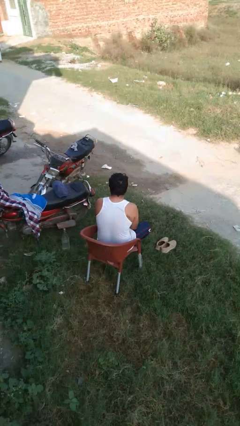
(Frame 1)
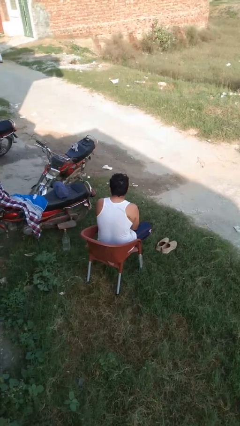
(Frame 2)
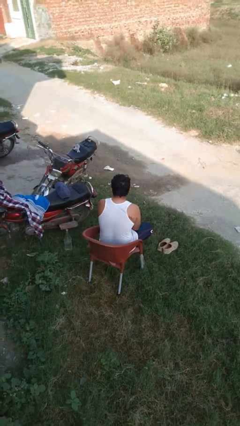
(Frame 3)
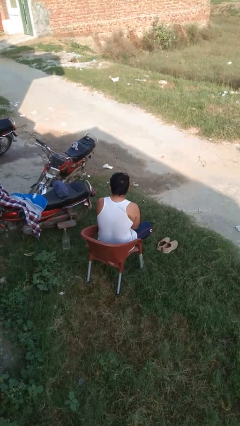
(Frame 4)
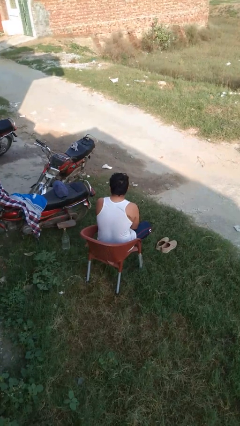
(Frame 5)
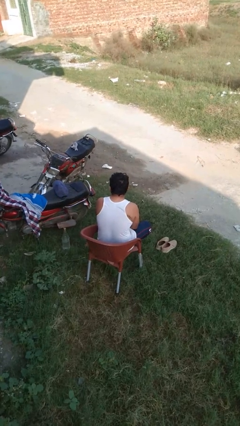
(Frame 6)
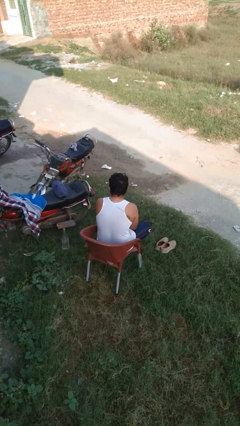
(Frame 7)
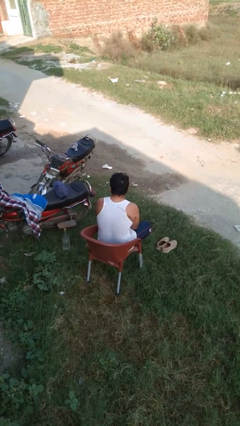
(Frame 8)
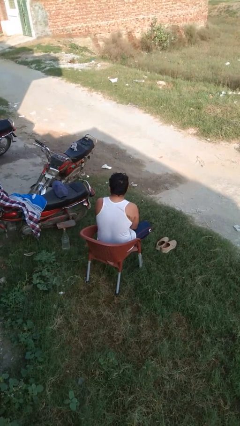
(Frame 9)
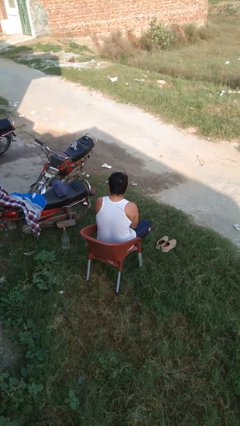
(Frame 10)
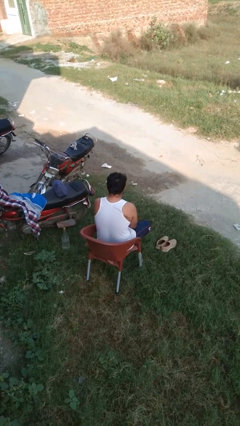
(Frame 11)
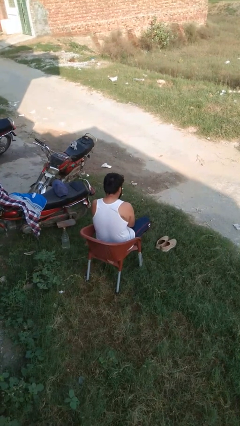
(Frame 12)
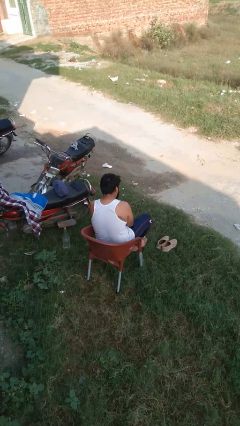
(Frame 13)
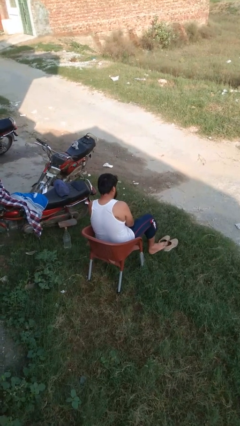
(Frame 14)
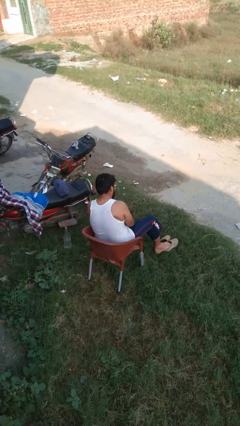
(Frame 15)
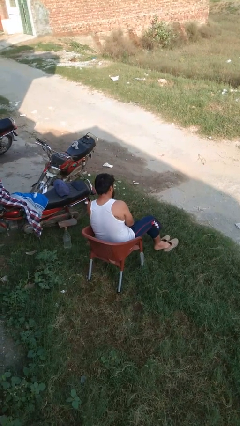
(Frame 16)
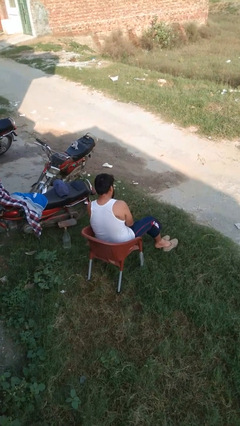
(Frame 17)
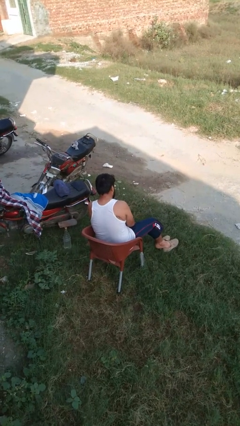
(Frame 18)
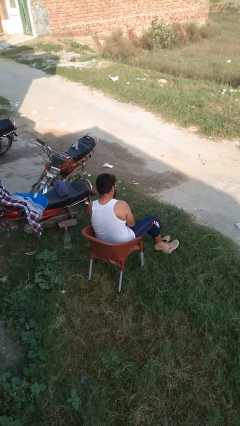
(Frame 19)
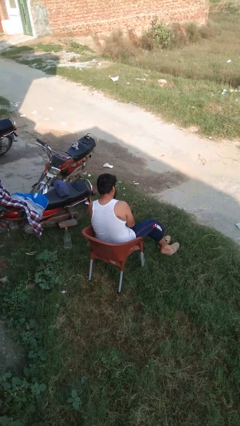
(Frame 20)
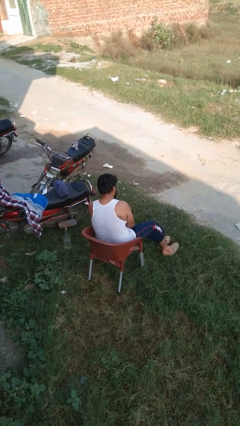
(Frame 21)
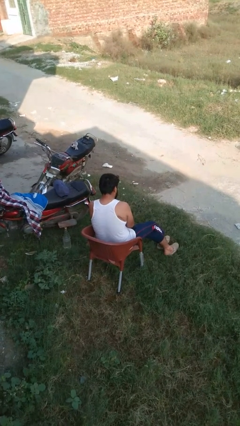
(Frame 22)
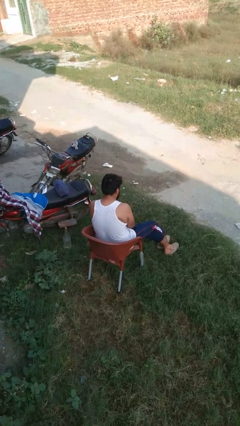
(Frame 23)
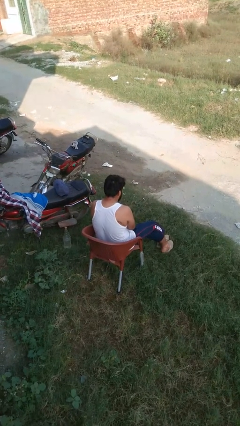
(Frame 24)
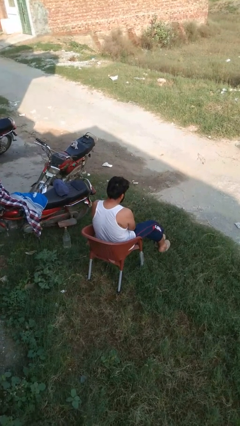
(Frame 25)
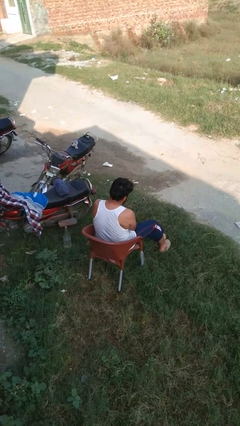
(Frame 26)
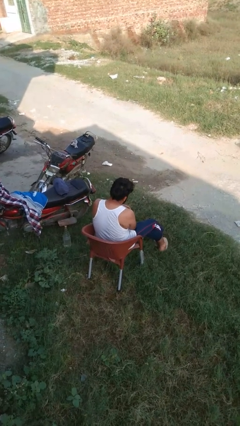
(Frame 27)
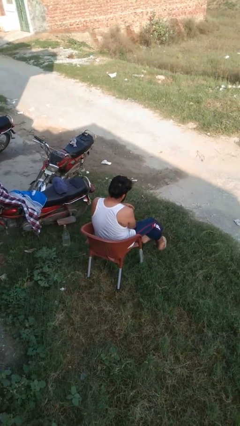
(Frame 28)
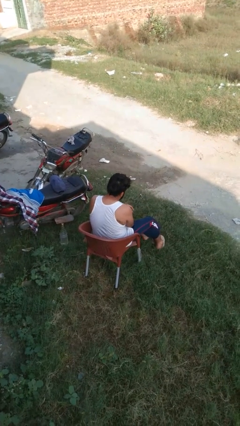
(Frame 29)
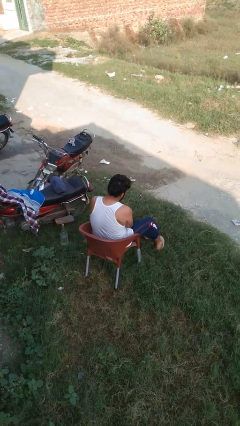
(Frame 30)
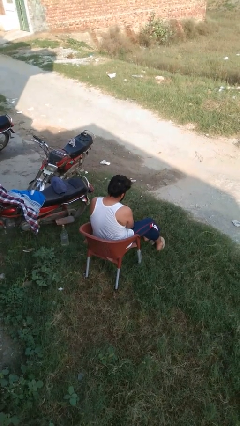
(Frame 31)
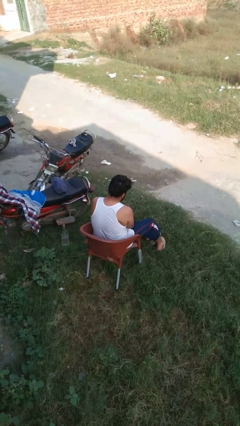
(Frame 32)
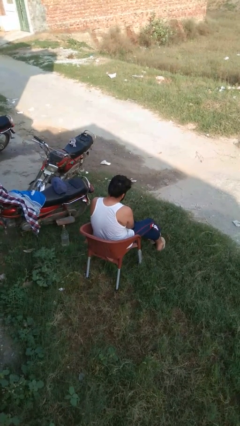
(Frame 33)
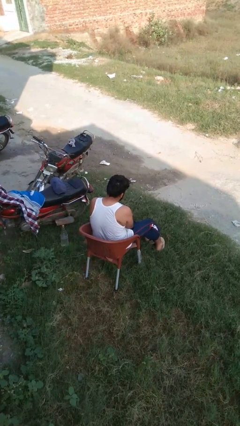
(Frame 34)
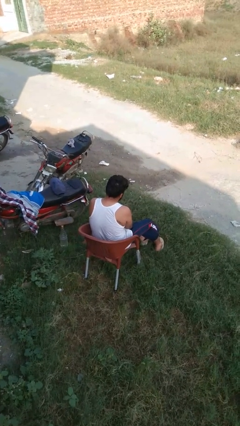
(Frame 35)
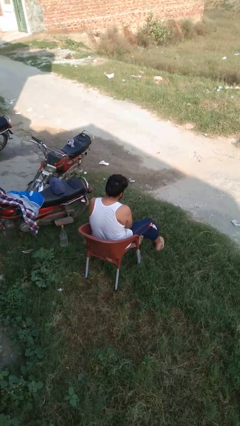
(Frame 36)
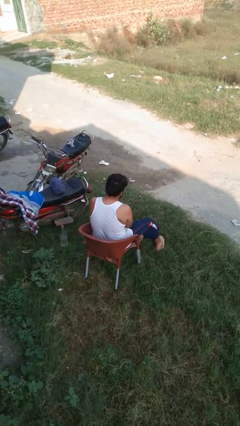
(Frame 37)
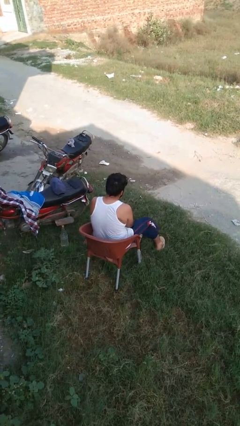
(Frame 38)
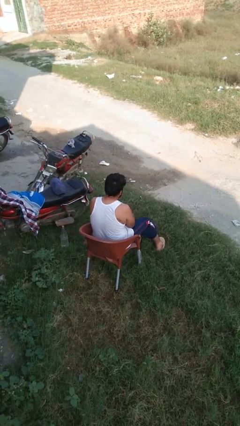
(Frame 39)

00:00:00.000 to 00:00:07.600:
person puts on shoes

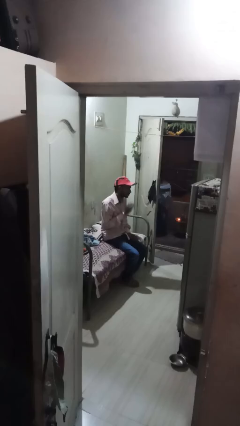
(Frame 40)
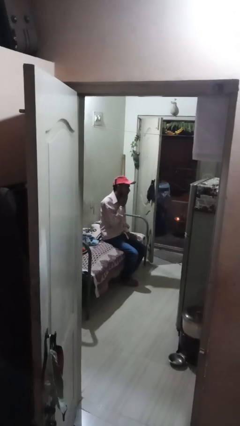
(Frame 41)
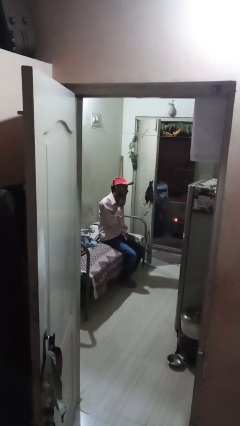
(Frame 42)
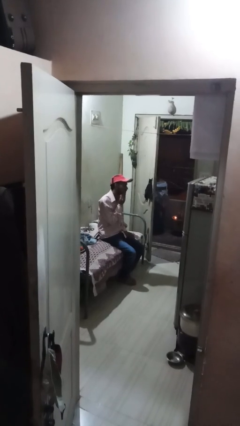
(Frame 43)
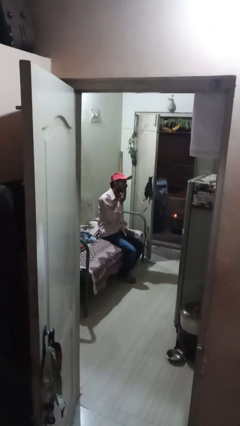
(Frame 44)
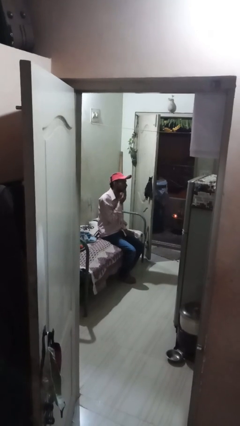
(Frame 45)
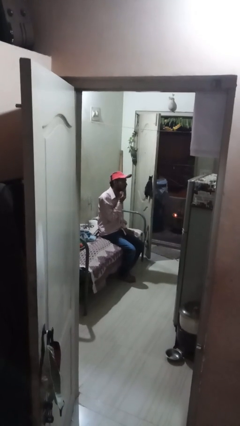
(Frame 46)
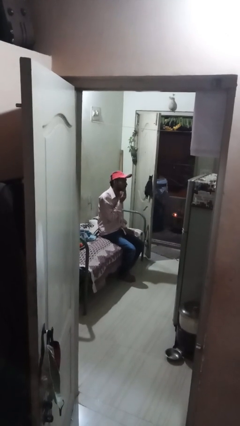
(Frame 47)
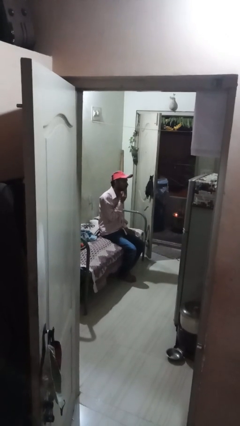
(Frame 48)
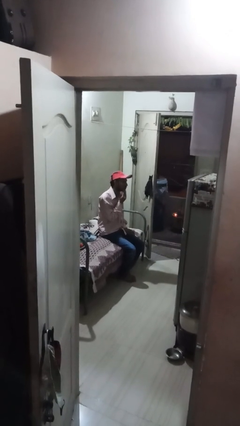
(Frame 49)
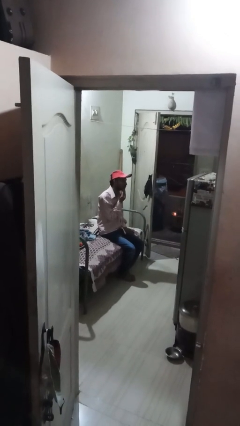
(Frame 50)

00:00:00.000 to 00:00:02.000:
person strokes chin

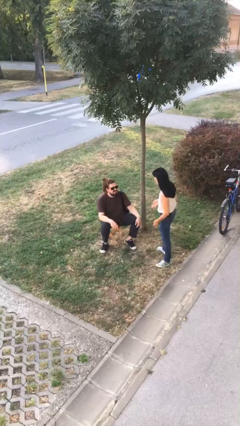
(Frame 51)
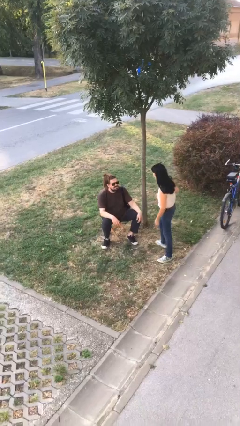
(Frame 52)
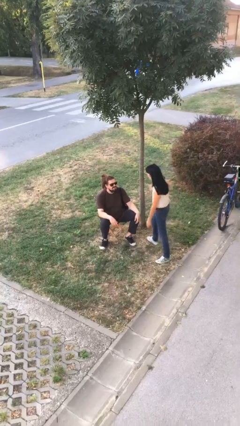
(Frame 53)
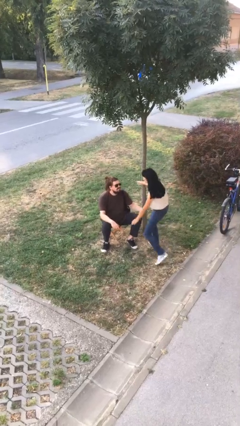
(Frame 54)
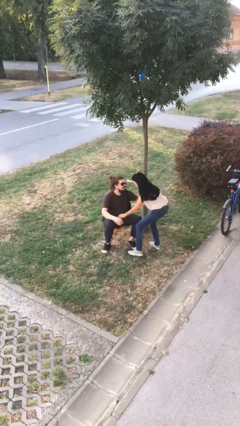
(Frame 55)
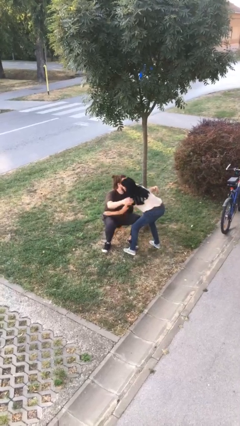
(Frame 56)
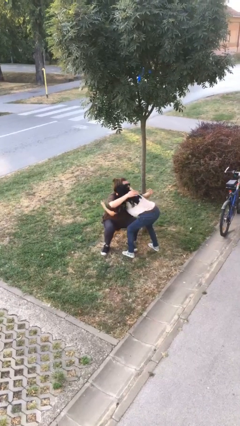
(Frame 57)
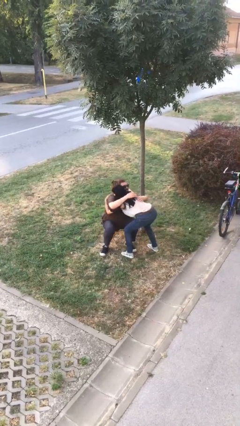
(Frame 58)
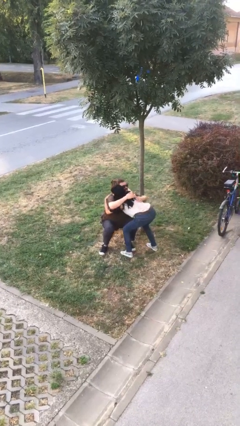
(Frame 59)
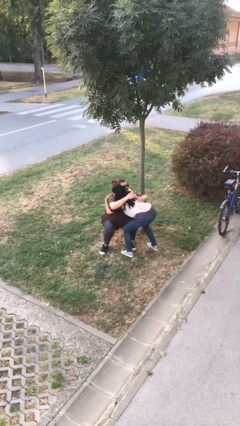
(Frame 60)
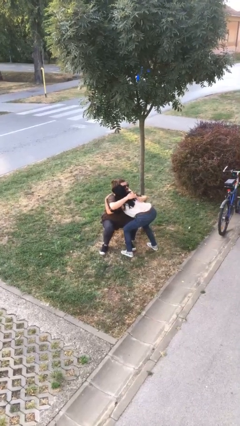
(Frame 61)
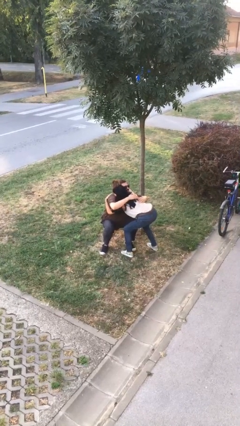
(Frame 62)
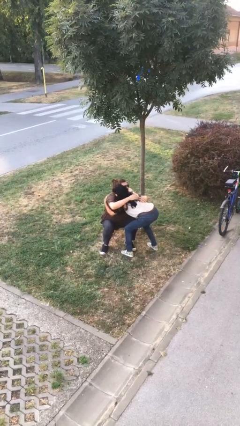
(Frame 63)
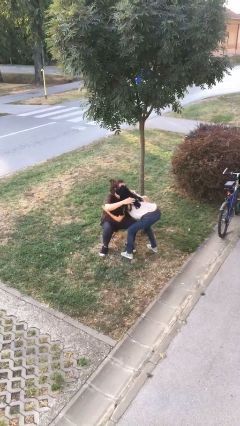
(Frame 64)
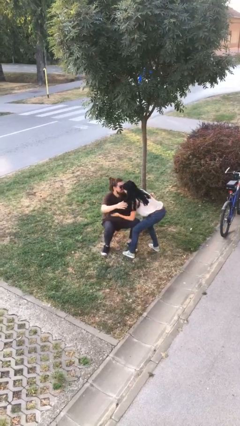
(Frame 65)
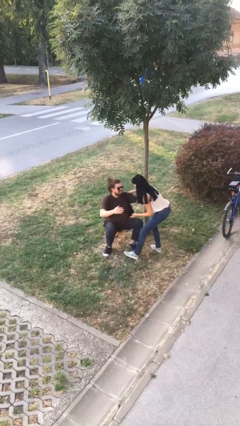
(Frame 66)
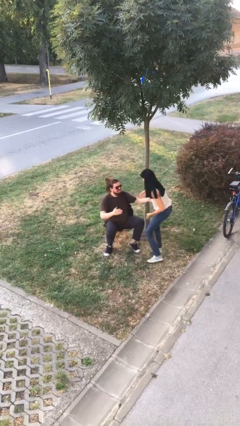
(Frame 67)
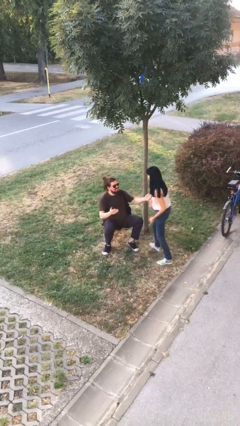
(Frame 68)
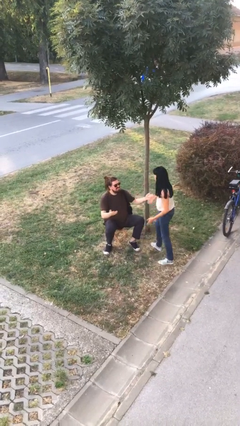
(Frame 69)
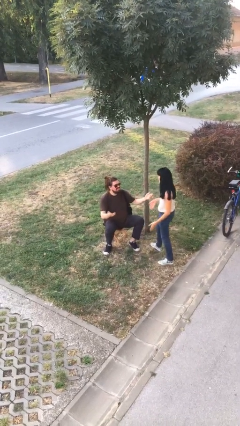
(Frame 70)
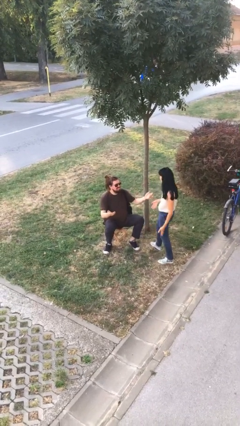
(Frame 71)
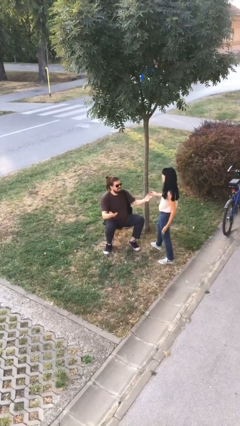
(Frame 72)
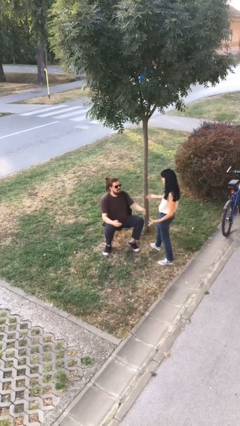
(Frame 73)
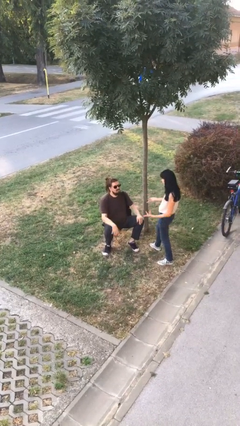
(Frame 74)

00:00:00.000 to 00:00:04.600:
person embraces person

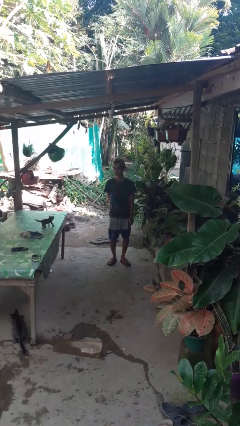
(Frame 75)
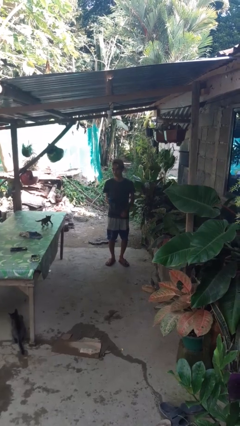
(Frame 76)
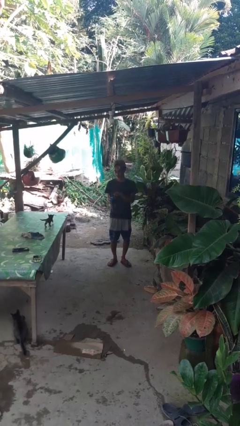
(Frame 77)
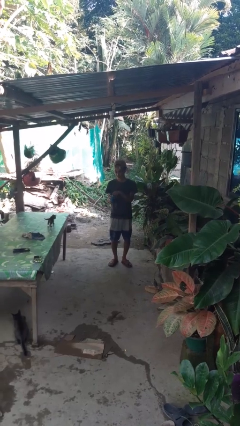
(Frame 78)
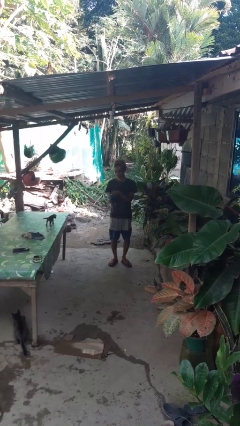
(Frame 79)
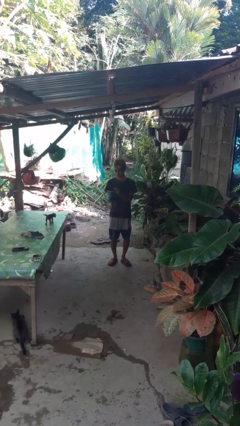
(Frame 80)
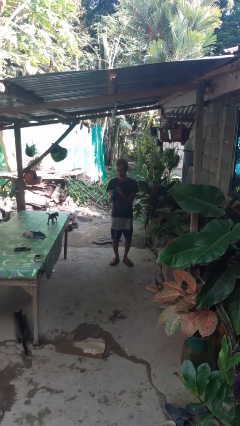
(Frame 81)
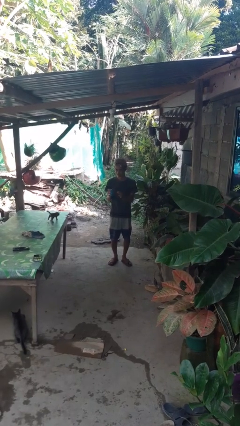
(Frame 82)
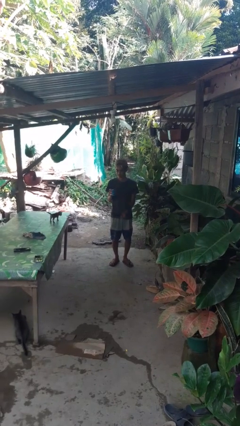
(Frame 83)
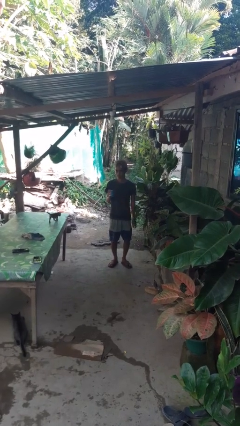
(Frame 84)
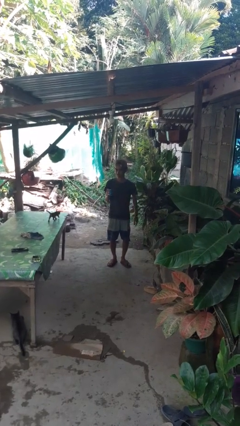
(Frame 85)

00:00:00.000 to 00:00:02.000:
person opens beverage can

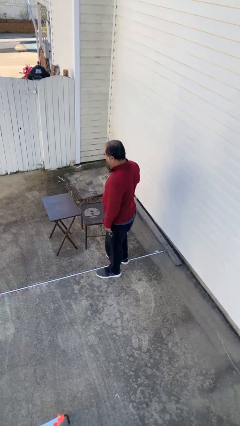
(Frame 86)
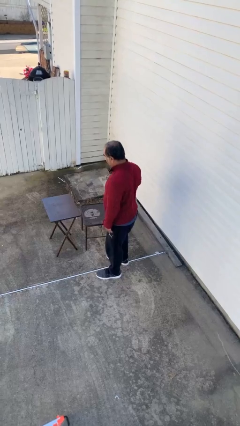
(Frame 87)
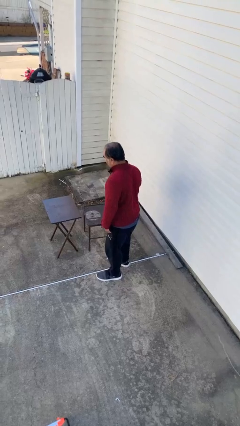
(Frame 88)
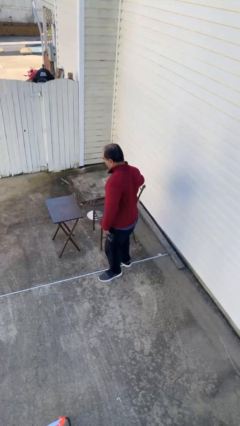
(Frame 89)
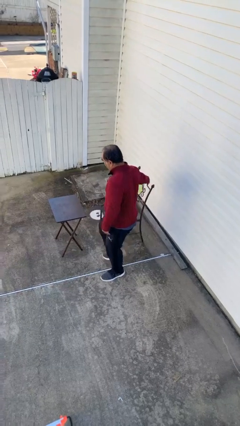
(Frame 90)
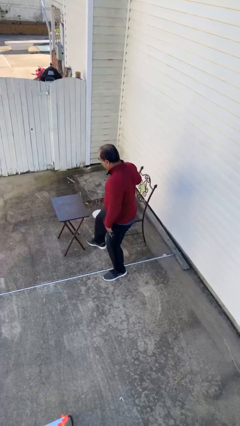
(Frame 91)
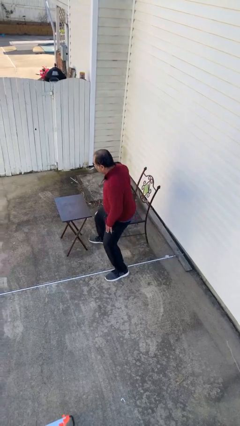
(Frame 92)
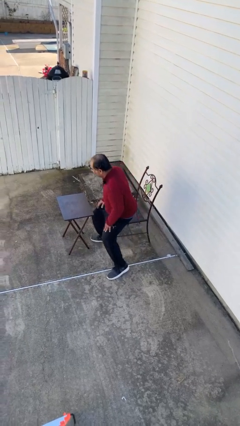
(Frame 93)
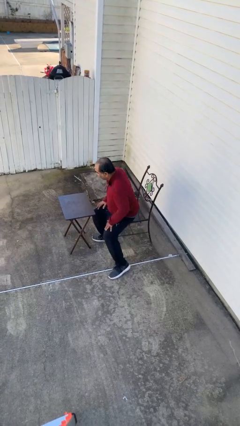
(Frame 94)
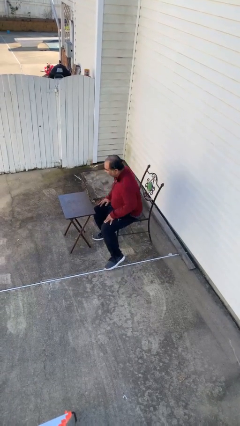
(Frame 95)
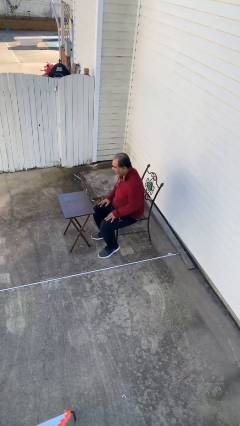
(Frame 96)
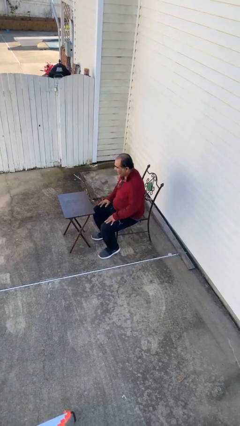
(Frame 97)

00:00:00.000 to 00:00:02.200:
person sits down
